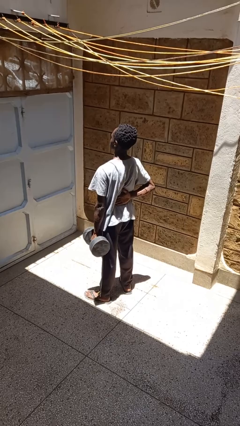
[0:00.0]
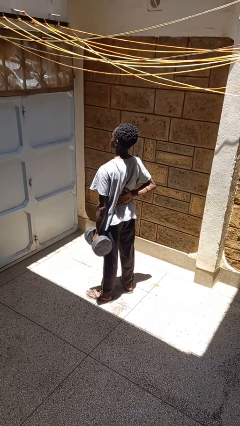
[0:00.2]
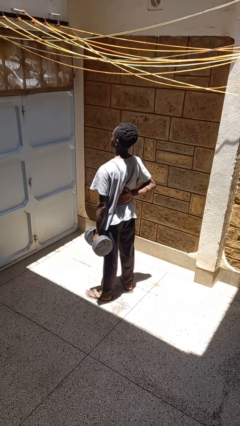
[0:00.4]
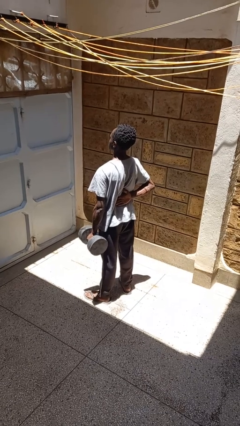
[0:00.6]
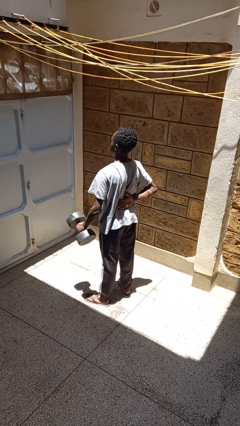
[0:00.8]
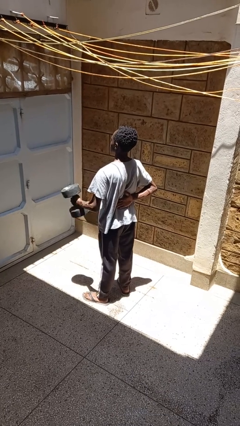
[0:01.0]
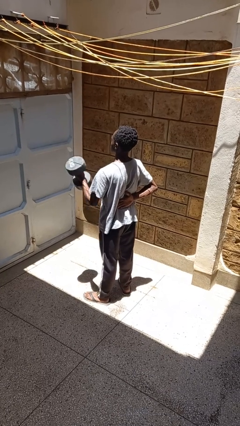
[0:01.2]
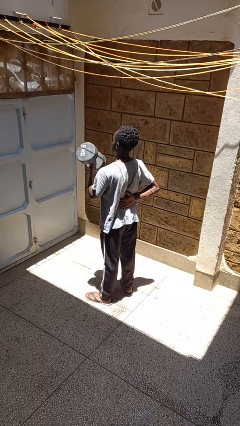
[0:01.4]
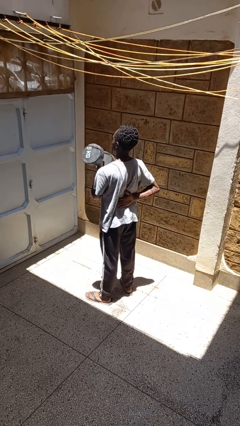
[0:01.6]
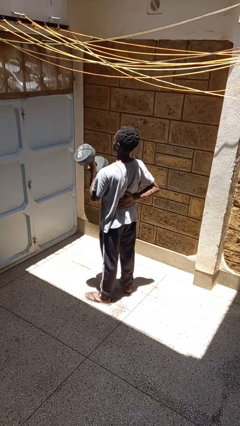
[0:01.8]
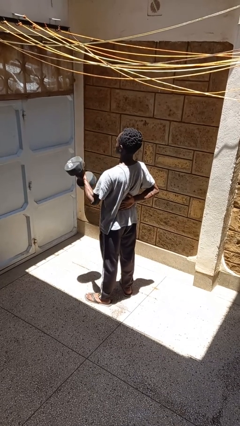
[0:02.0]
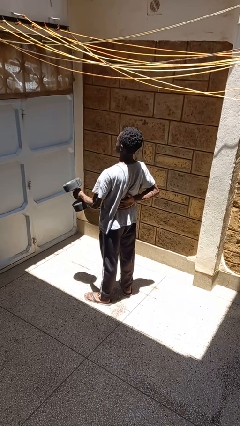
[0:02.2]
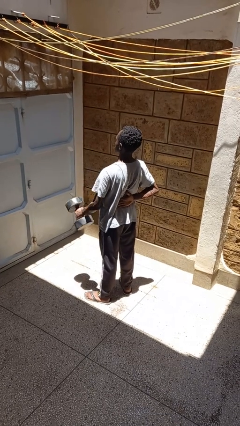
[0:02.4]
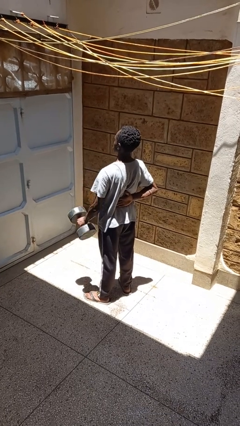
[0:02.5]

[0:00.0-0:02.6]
person lifts dumbbells

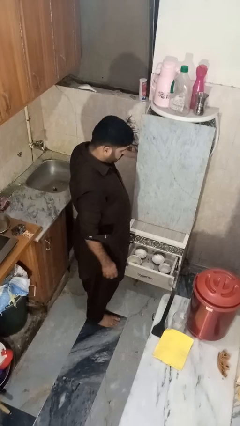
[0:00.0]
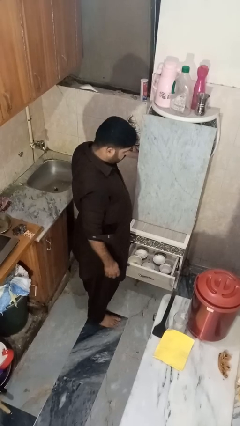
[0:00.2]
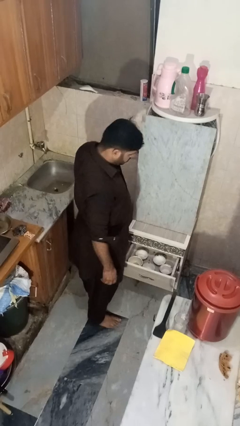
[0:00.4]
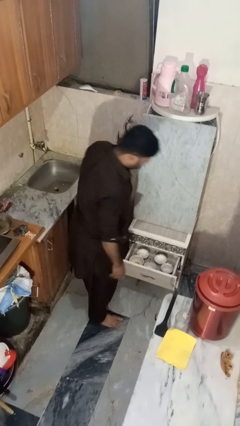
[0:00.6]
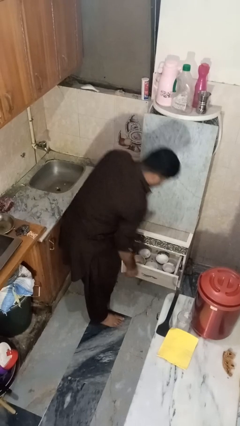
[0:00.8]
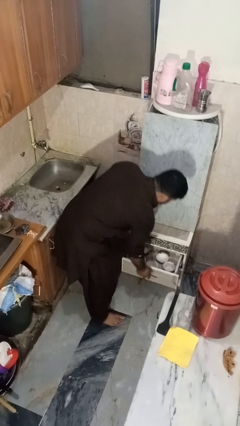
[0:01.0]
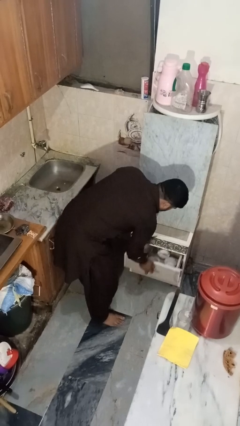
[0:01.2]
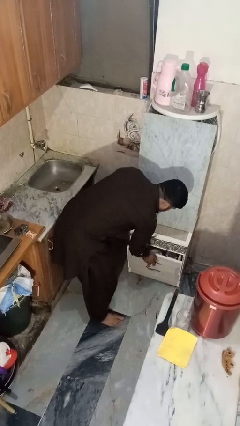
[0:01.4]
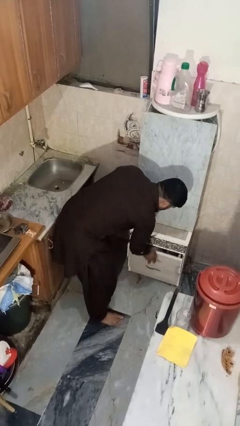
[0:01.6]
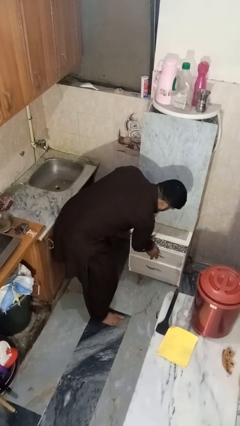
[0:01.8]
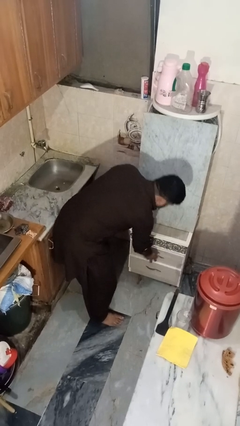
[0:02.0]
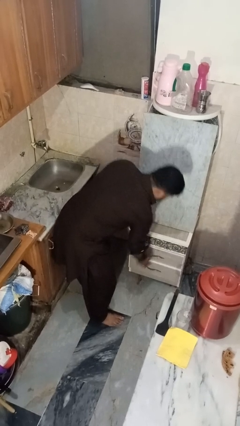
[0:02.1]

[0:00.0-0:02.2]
person closes kitchen drawer

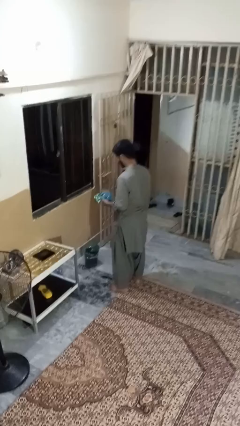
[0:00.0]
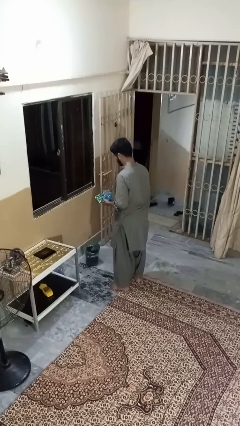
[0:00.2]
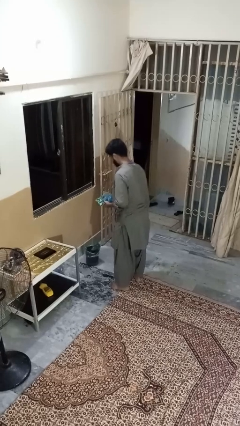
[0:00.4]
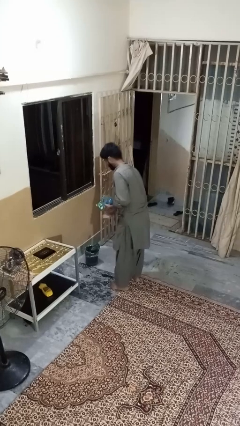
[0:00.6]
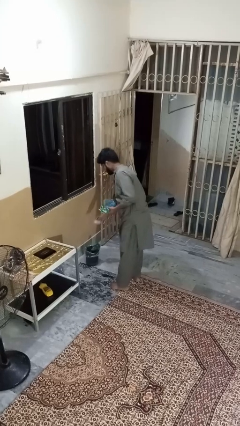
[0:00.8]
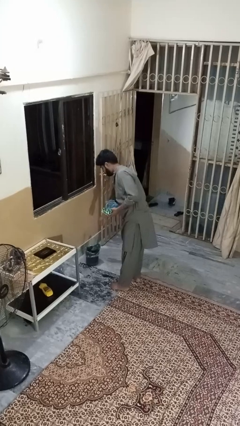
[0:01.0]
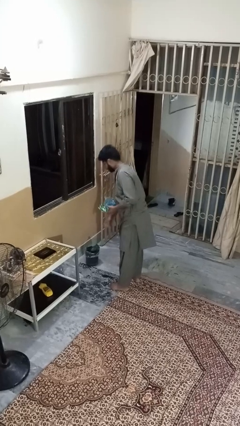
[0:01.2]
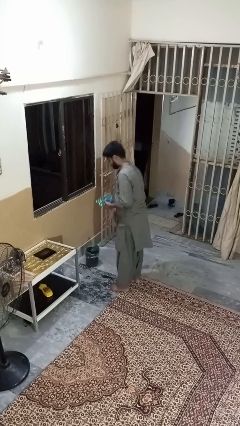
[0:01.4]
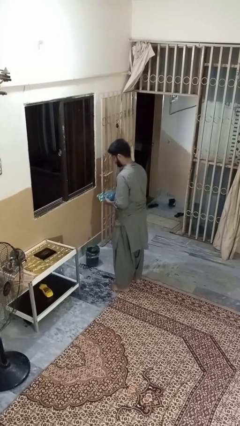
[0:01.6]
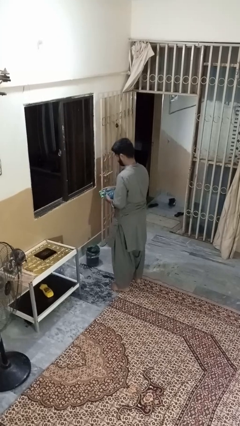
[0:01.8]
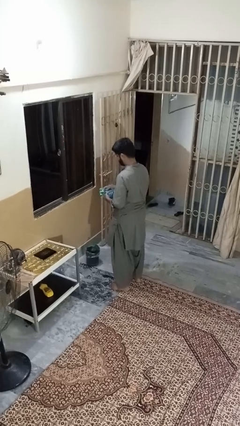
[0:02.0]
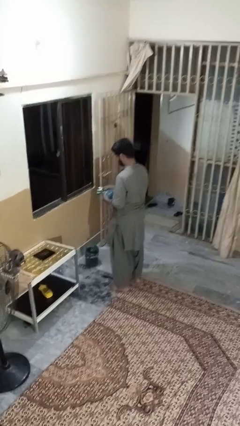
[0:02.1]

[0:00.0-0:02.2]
person discards trash

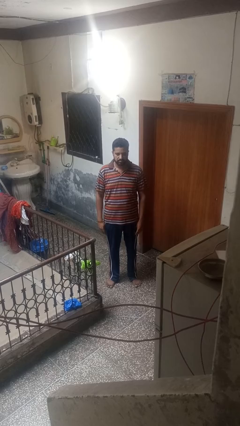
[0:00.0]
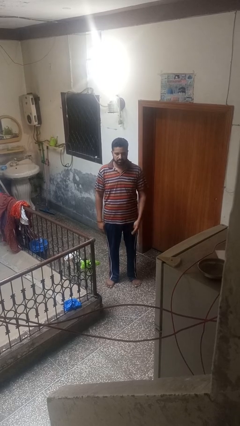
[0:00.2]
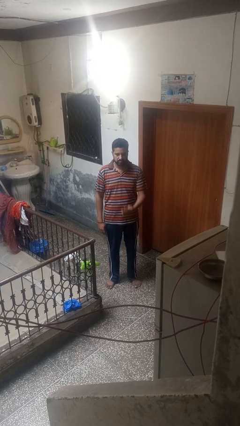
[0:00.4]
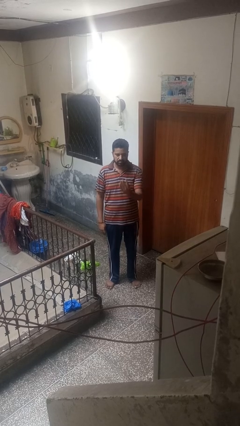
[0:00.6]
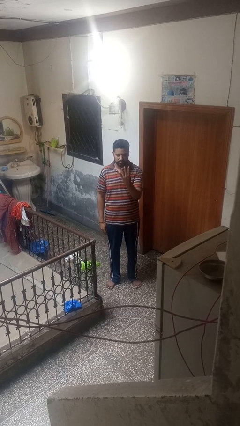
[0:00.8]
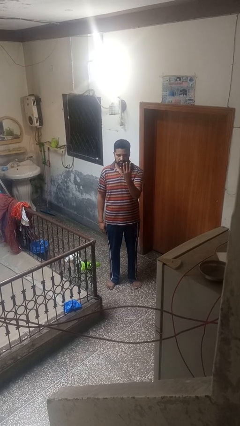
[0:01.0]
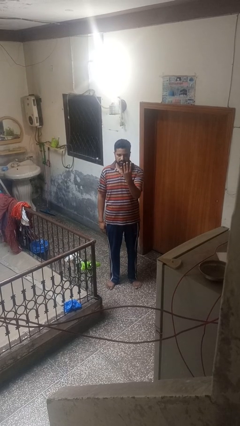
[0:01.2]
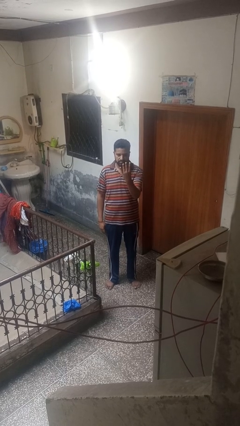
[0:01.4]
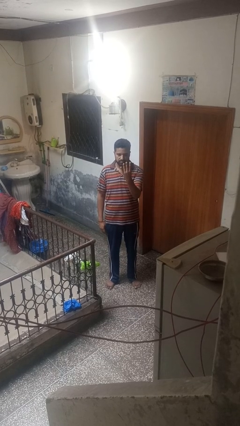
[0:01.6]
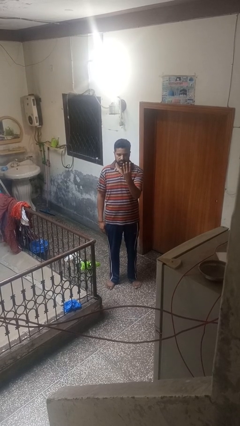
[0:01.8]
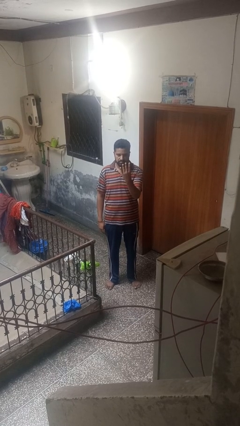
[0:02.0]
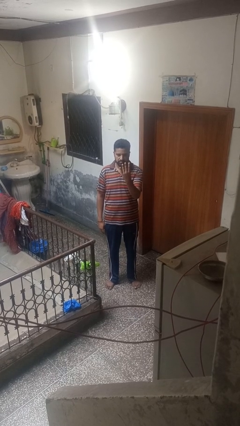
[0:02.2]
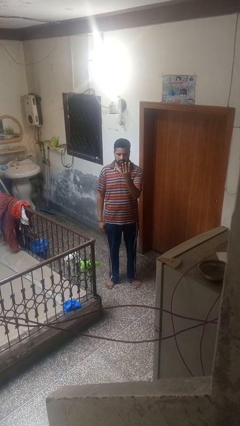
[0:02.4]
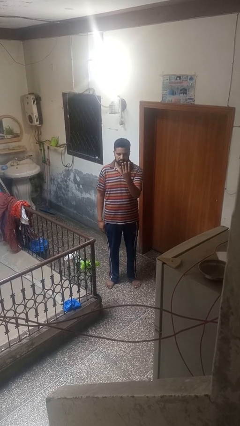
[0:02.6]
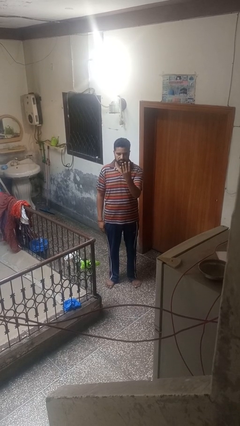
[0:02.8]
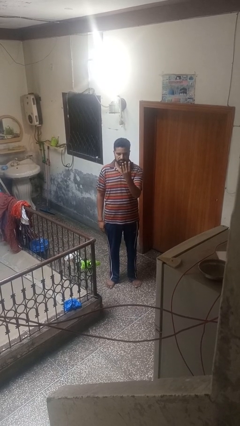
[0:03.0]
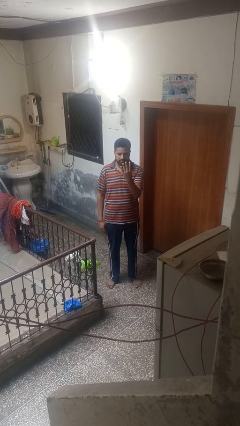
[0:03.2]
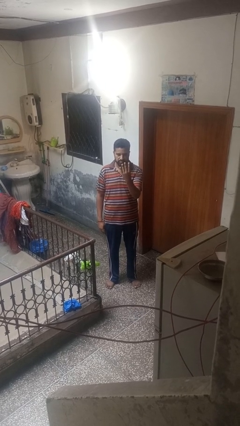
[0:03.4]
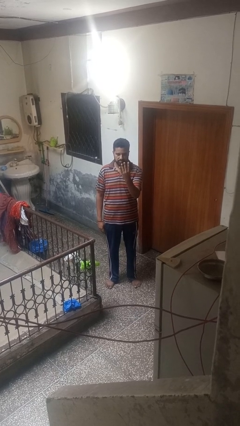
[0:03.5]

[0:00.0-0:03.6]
person gestures number four

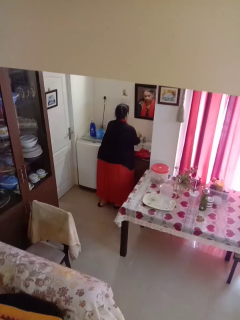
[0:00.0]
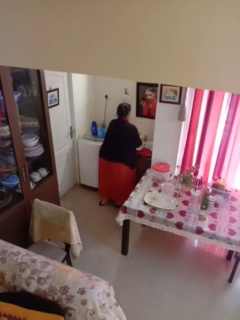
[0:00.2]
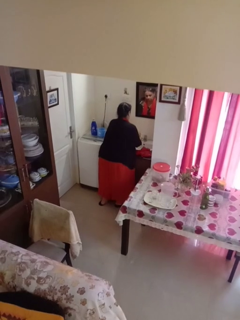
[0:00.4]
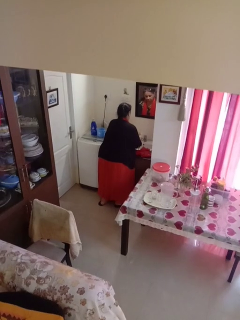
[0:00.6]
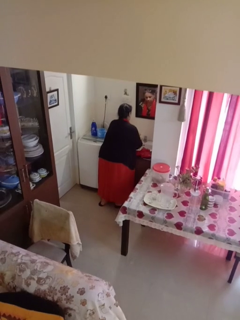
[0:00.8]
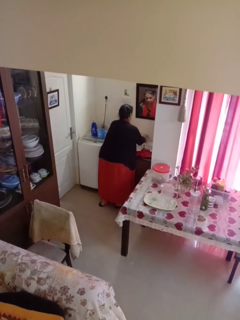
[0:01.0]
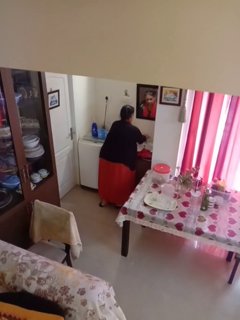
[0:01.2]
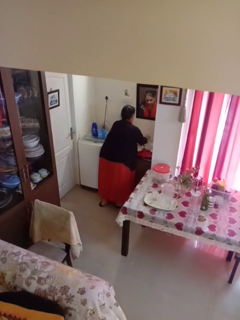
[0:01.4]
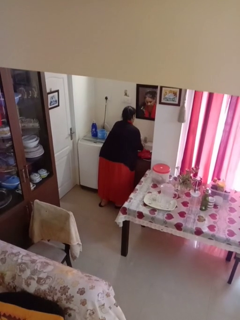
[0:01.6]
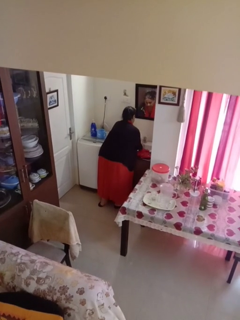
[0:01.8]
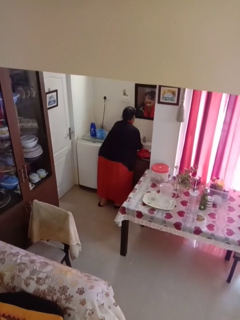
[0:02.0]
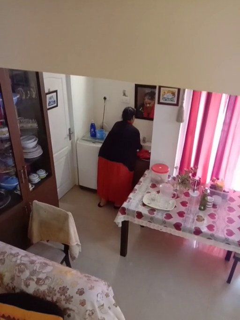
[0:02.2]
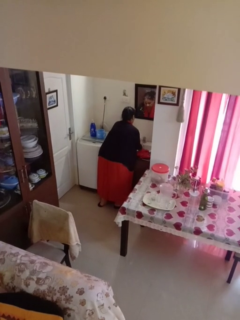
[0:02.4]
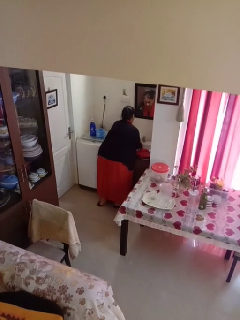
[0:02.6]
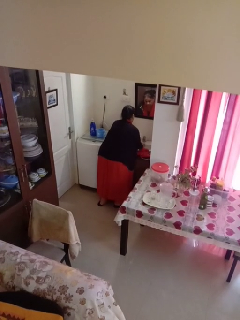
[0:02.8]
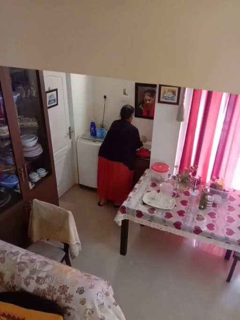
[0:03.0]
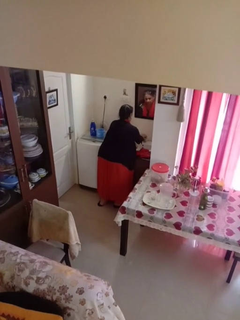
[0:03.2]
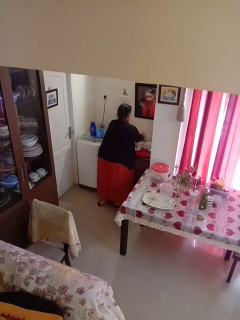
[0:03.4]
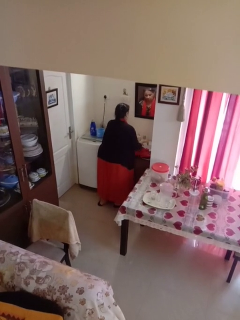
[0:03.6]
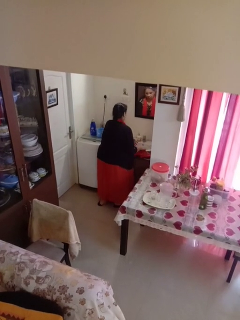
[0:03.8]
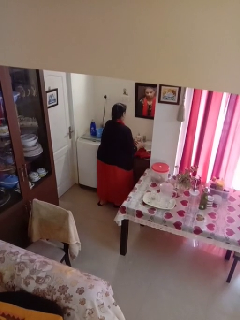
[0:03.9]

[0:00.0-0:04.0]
person washes hands

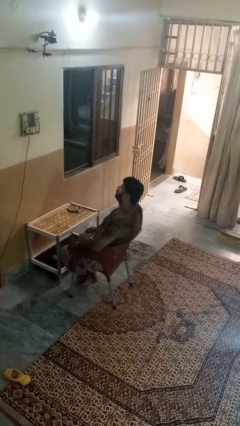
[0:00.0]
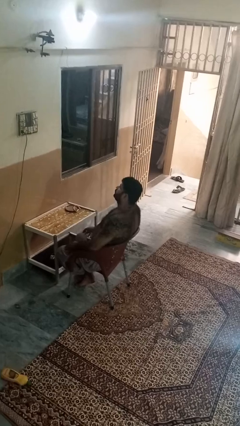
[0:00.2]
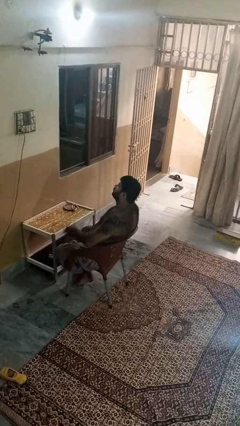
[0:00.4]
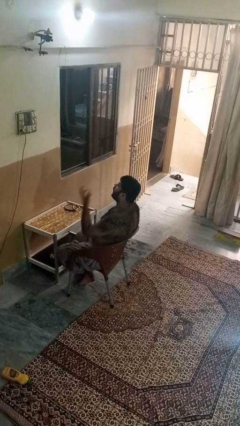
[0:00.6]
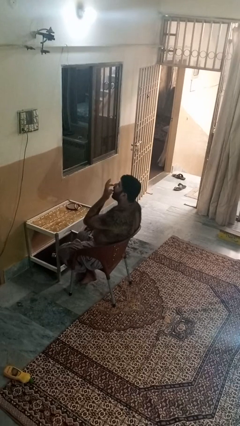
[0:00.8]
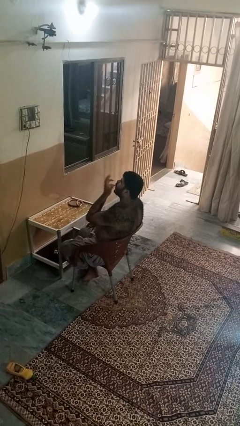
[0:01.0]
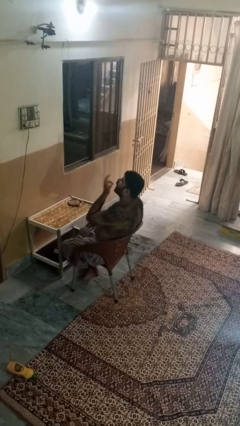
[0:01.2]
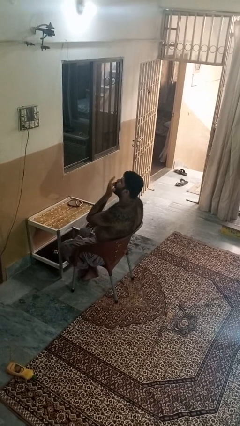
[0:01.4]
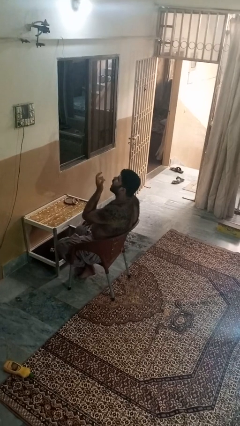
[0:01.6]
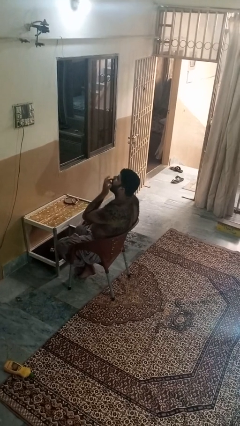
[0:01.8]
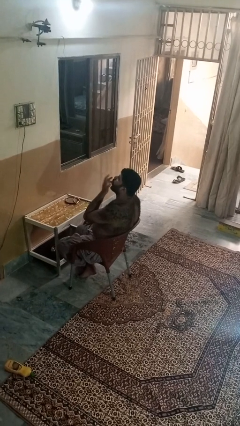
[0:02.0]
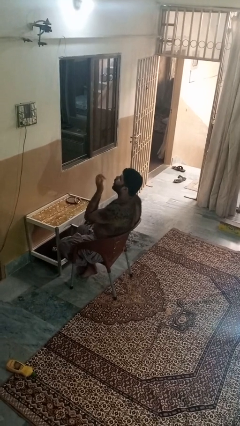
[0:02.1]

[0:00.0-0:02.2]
person licks fingers

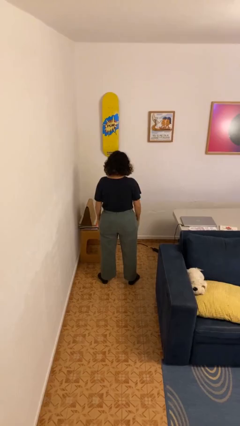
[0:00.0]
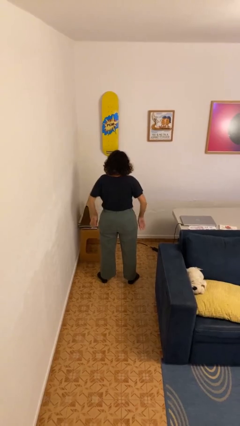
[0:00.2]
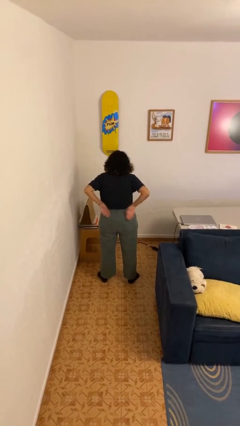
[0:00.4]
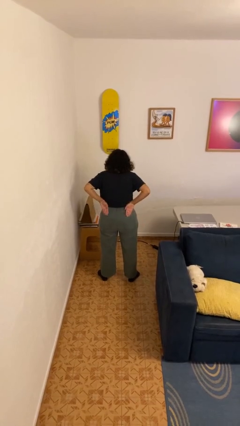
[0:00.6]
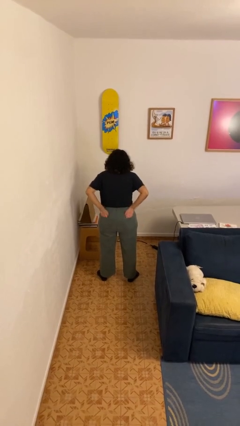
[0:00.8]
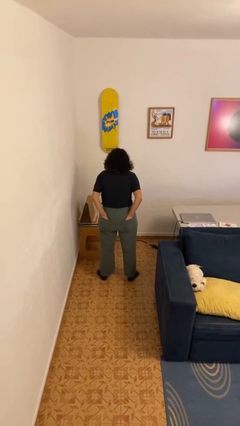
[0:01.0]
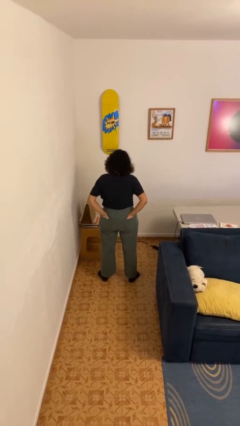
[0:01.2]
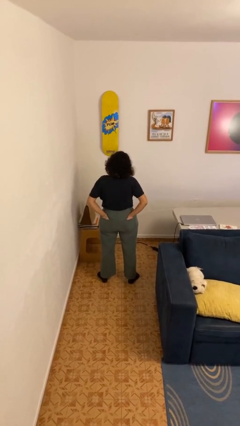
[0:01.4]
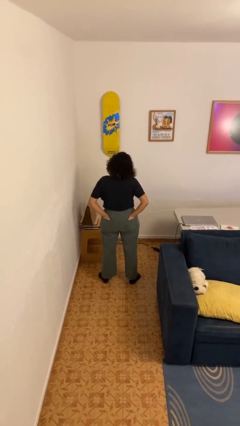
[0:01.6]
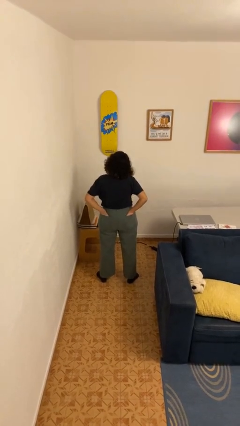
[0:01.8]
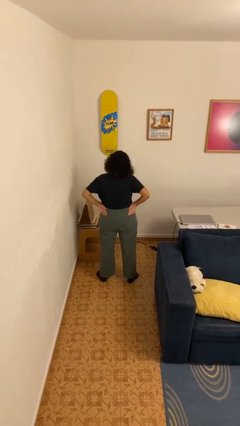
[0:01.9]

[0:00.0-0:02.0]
person puts hands in back pockets
